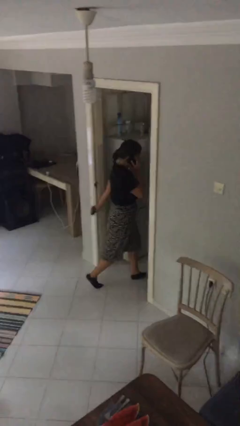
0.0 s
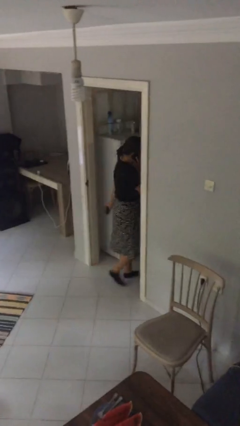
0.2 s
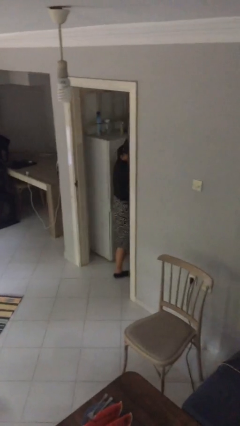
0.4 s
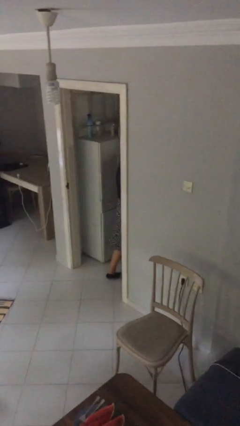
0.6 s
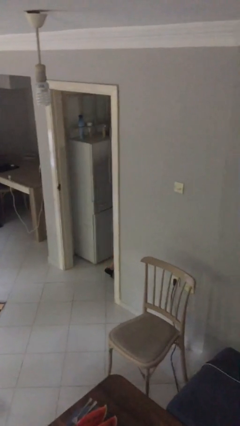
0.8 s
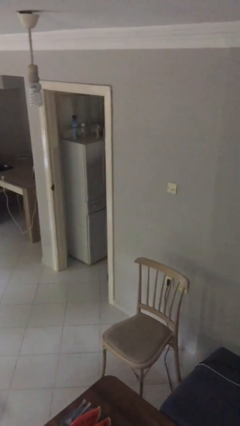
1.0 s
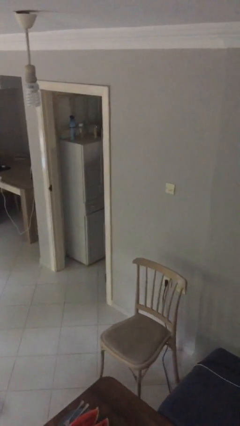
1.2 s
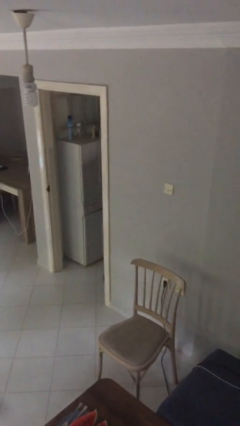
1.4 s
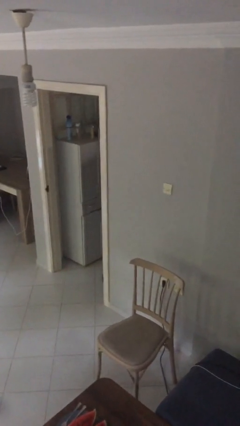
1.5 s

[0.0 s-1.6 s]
person exits scene through structure

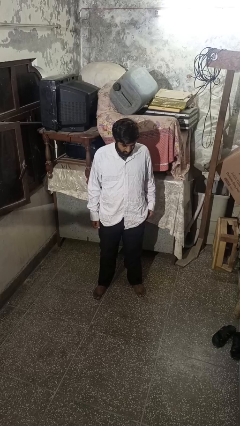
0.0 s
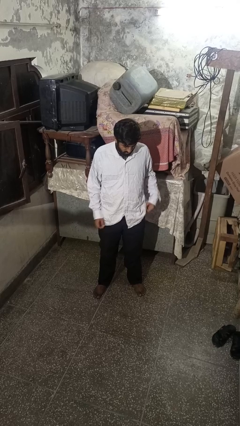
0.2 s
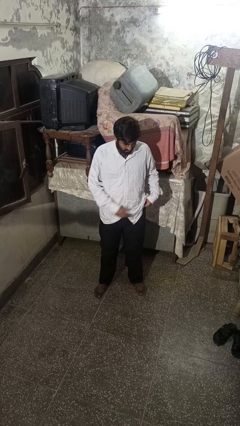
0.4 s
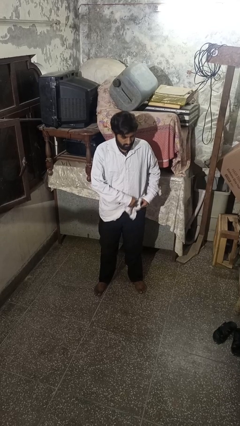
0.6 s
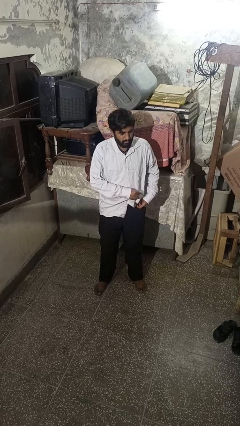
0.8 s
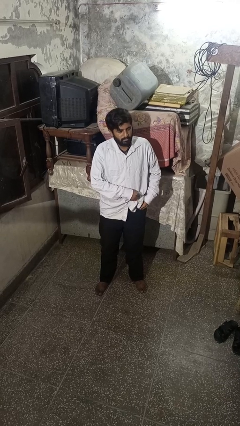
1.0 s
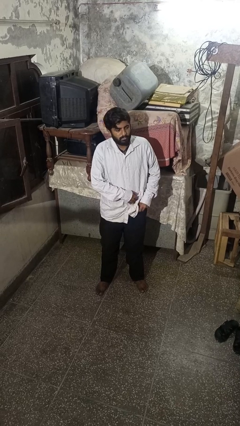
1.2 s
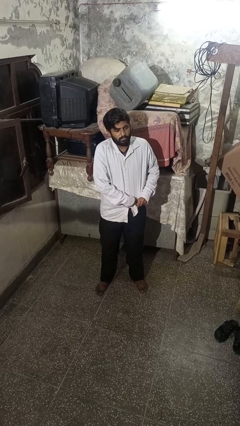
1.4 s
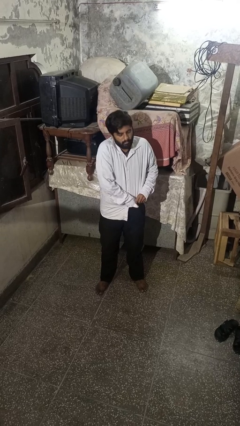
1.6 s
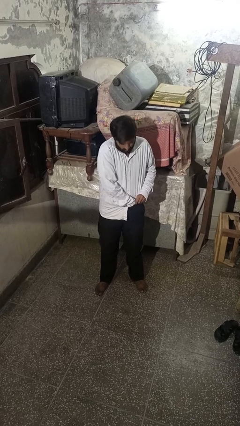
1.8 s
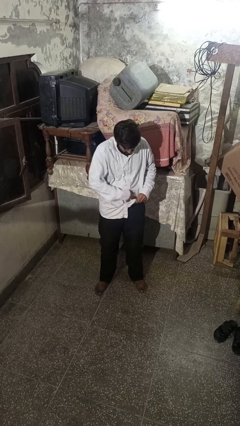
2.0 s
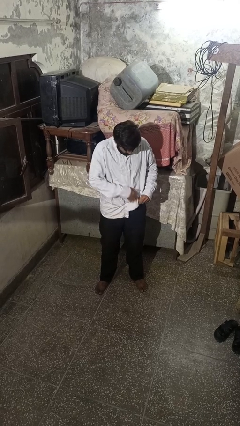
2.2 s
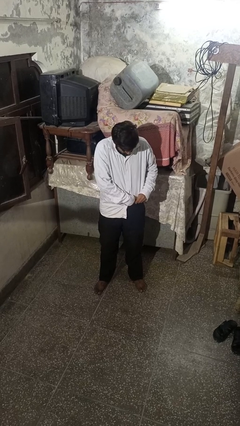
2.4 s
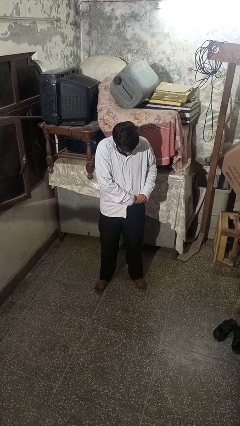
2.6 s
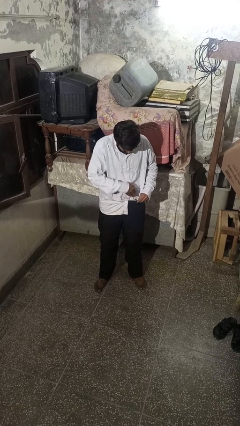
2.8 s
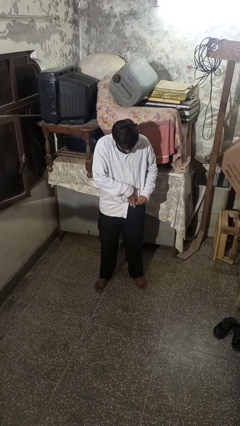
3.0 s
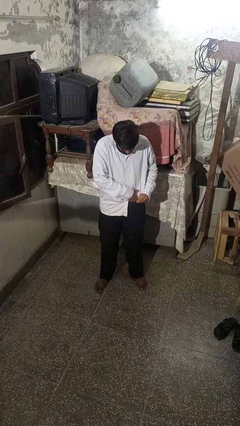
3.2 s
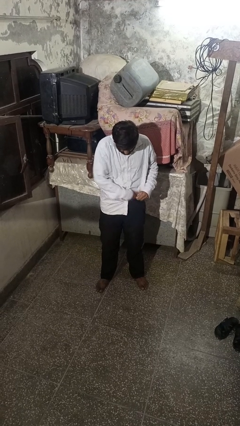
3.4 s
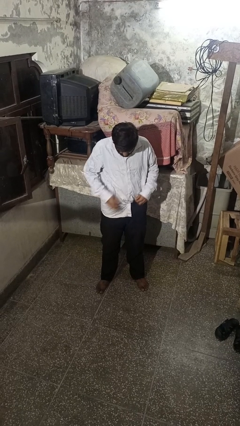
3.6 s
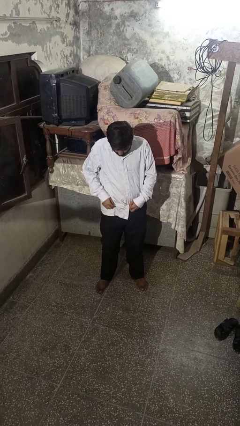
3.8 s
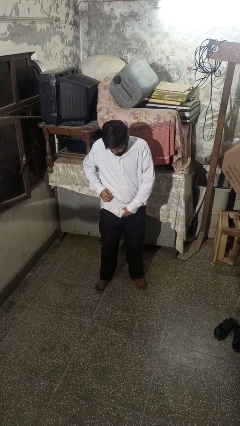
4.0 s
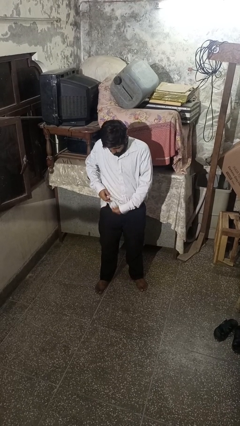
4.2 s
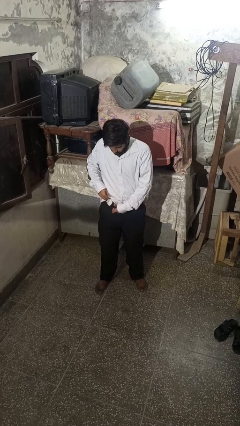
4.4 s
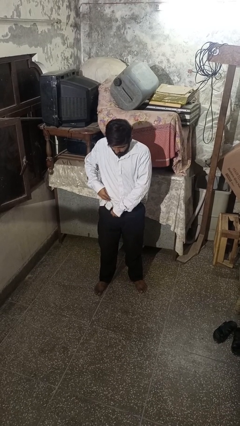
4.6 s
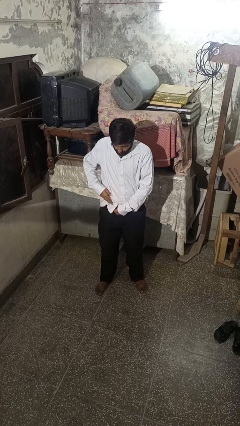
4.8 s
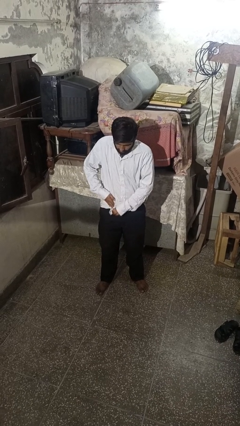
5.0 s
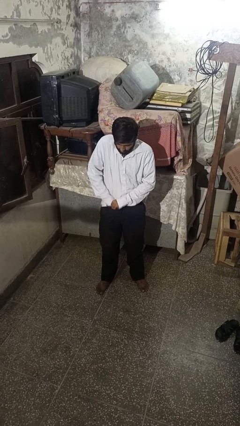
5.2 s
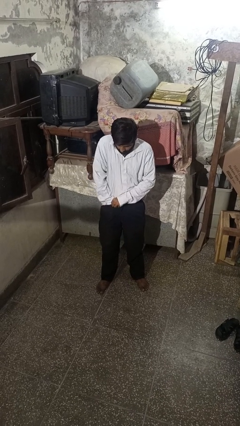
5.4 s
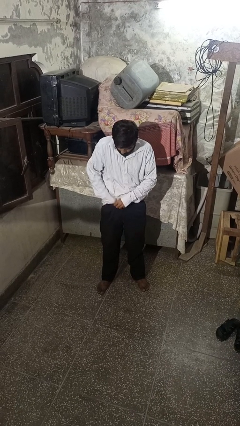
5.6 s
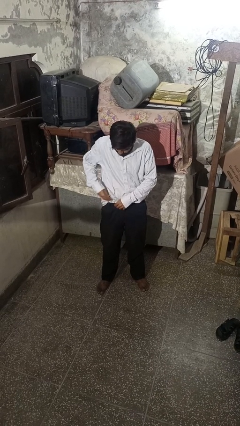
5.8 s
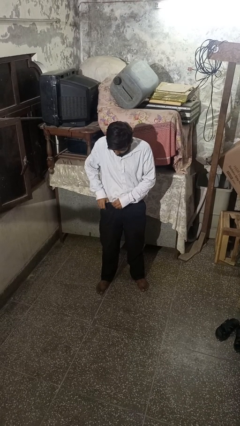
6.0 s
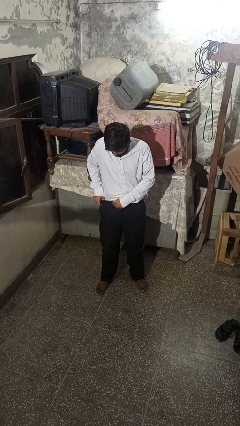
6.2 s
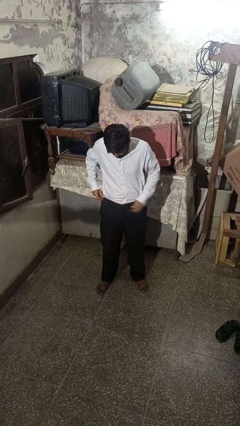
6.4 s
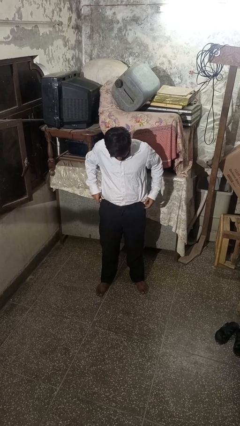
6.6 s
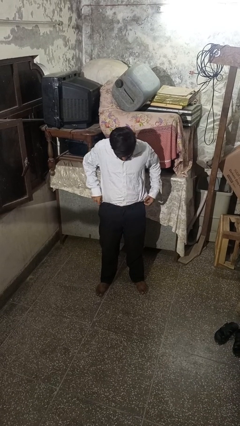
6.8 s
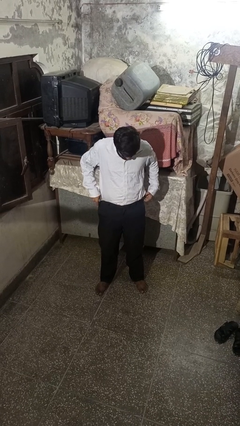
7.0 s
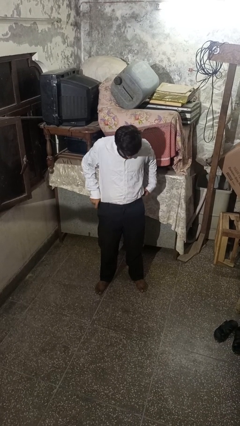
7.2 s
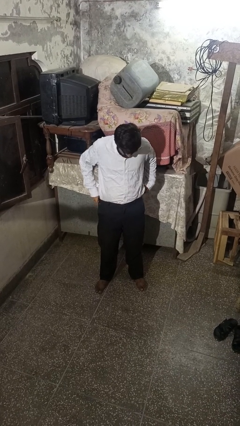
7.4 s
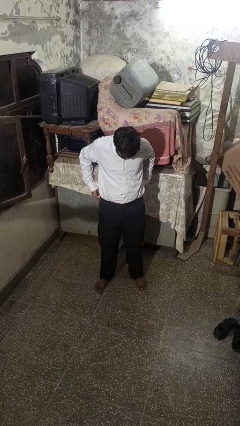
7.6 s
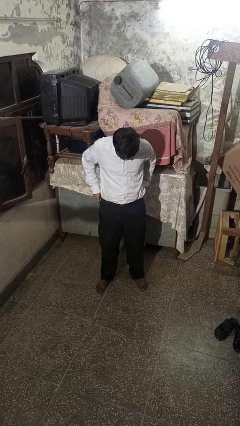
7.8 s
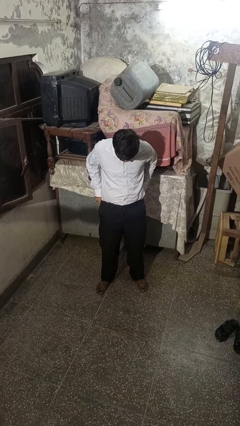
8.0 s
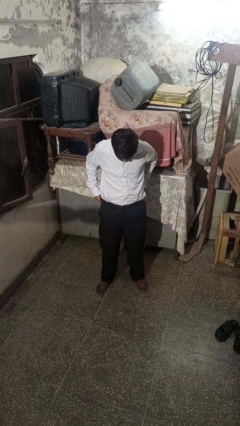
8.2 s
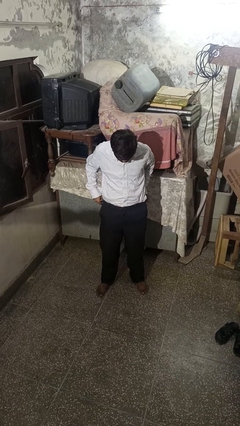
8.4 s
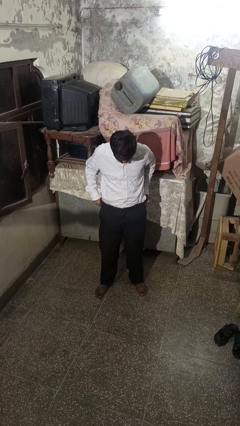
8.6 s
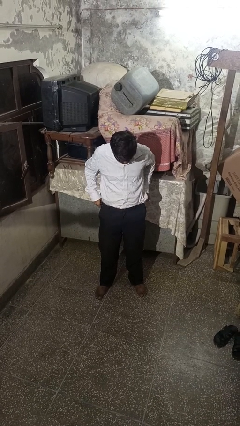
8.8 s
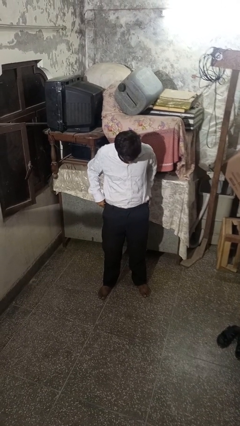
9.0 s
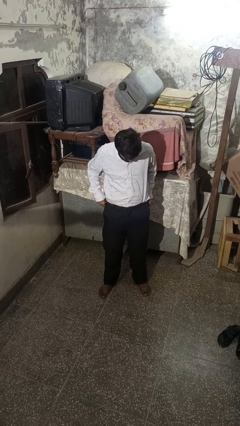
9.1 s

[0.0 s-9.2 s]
person tucks in shirt

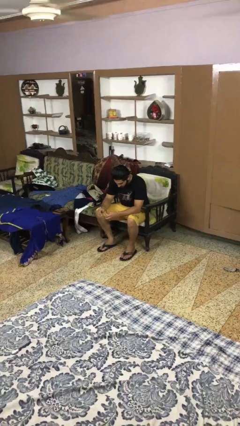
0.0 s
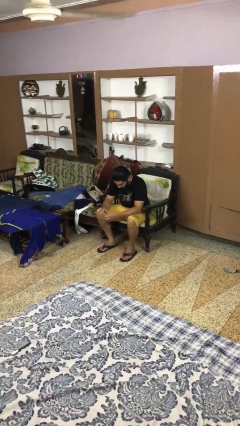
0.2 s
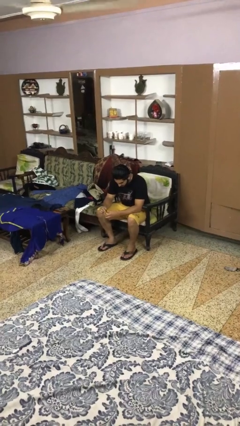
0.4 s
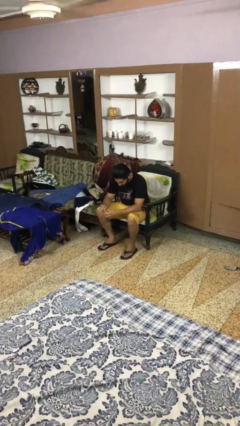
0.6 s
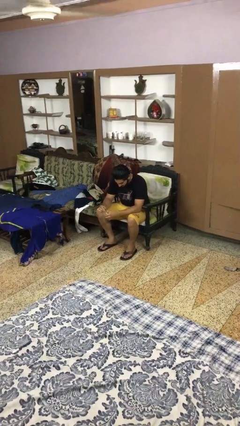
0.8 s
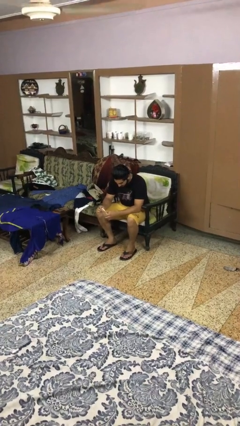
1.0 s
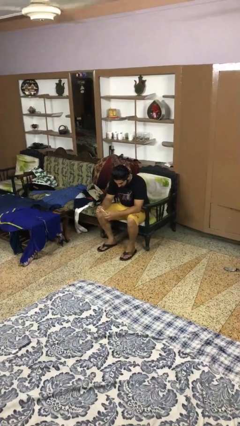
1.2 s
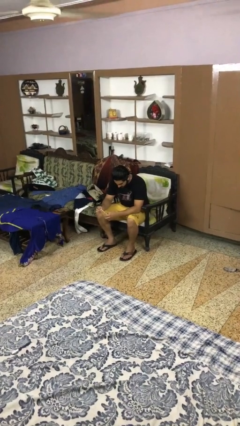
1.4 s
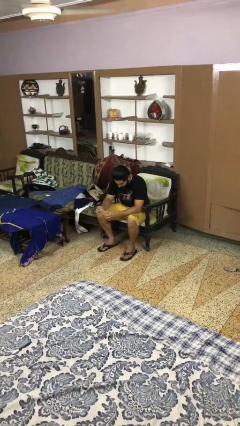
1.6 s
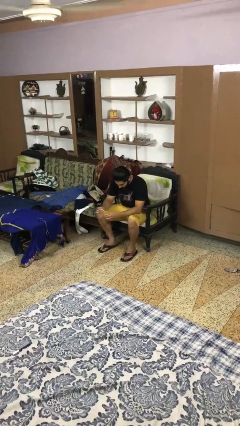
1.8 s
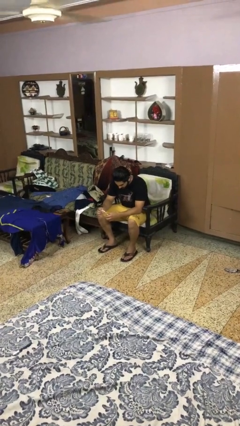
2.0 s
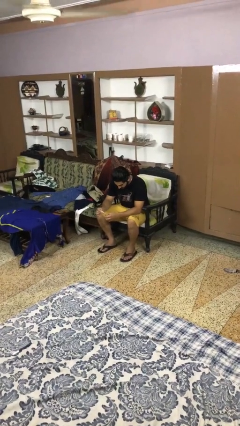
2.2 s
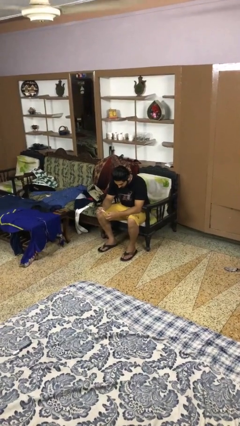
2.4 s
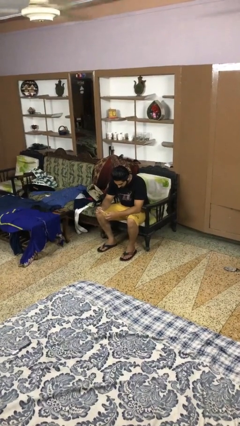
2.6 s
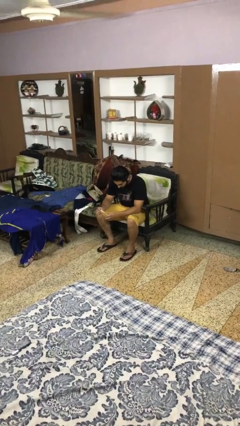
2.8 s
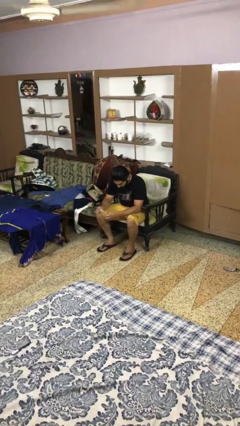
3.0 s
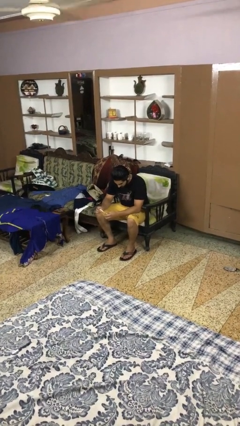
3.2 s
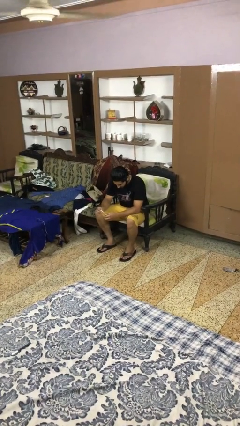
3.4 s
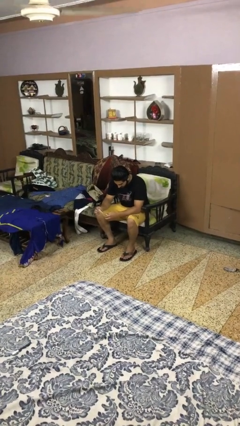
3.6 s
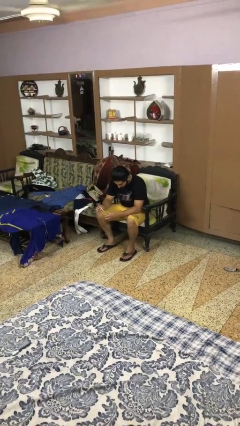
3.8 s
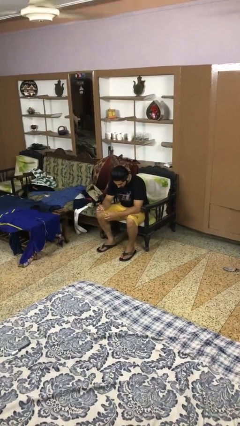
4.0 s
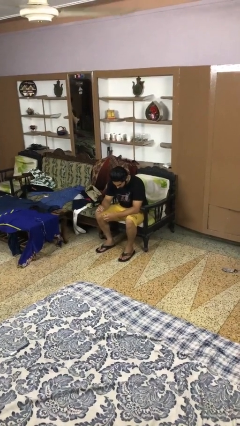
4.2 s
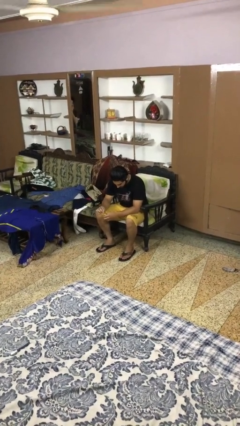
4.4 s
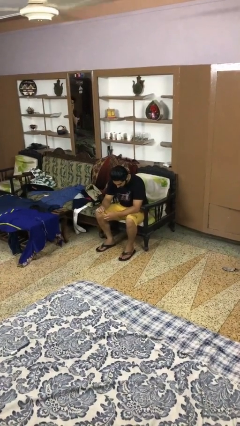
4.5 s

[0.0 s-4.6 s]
person paints fingernails

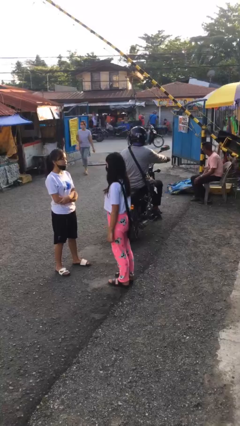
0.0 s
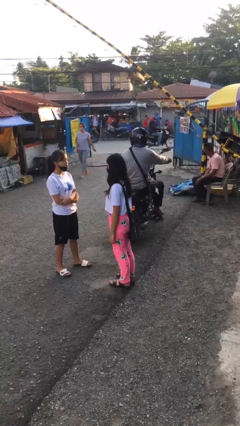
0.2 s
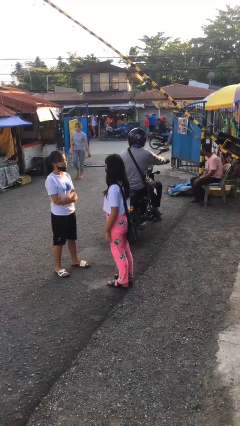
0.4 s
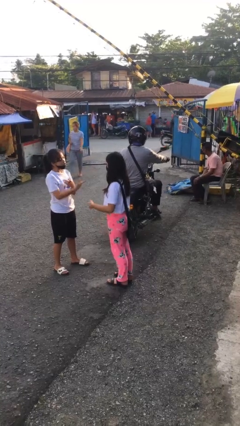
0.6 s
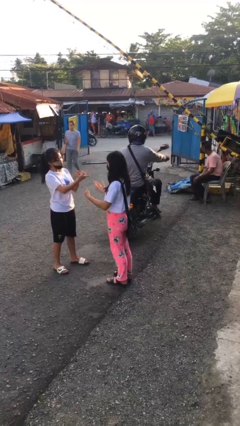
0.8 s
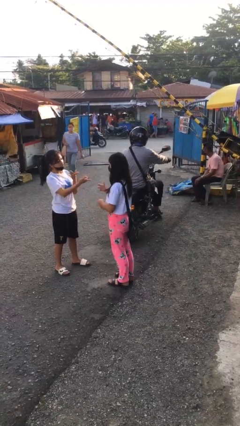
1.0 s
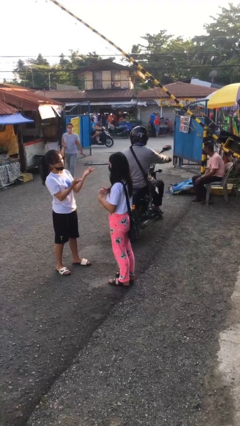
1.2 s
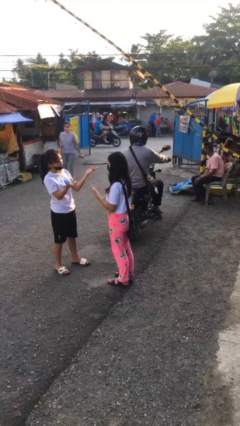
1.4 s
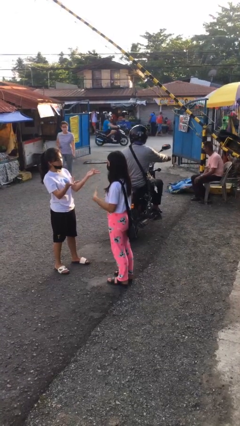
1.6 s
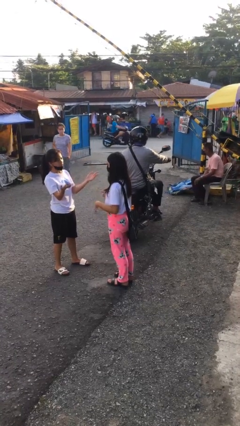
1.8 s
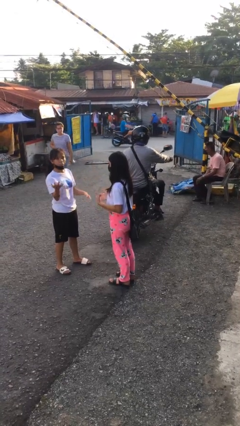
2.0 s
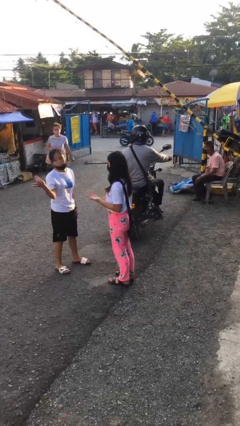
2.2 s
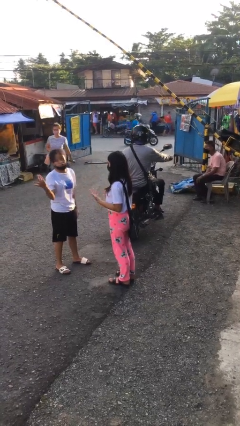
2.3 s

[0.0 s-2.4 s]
person talks to person
